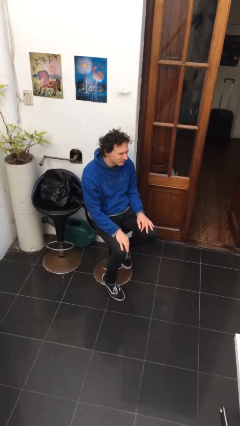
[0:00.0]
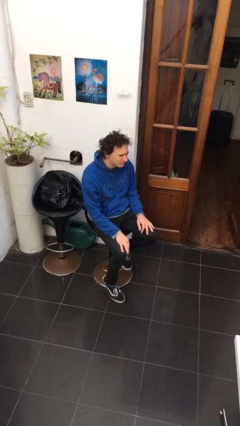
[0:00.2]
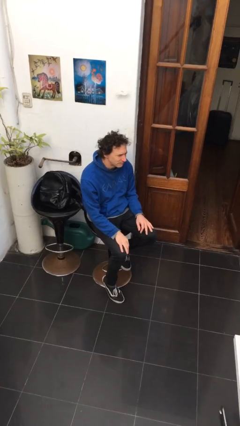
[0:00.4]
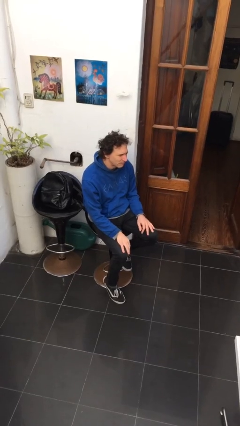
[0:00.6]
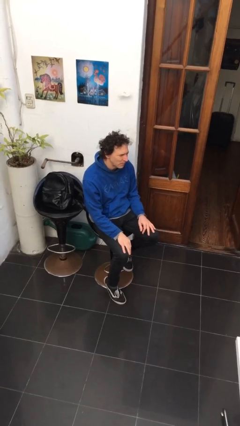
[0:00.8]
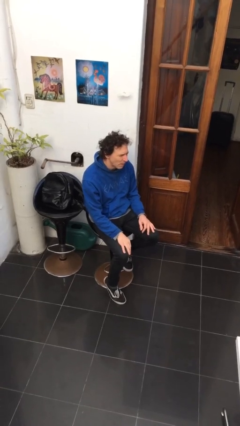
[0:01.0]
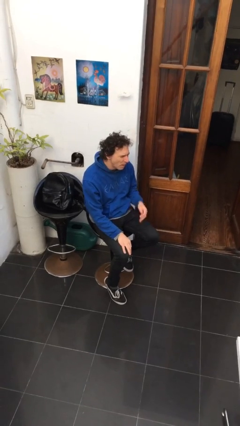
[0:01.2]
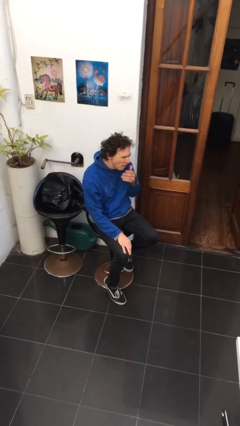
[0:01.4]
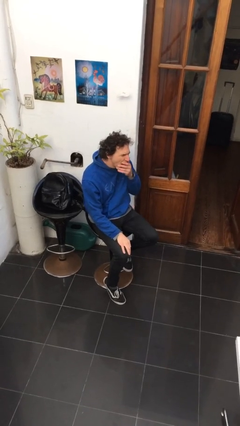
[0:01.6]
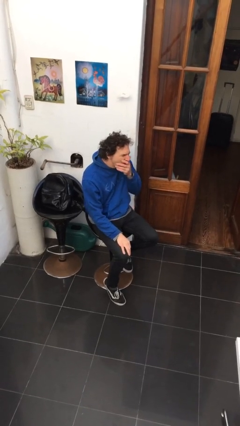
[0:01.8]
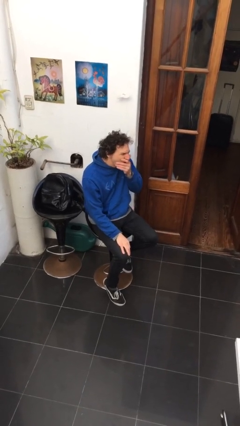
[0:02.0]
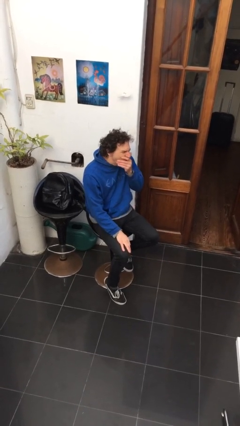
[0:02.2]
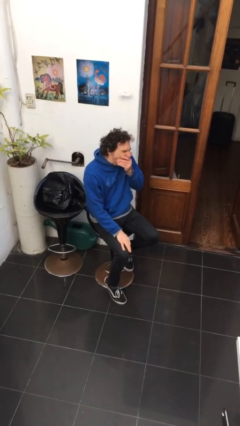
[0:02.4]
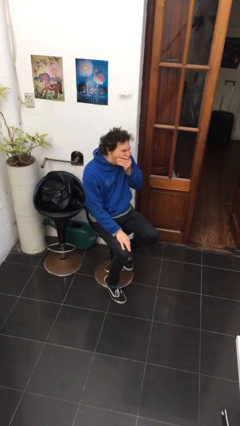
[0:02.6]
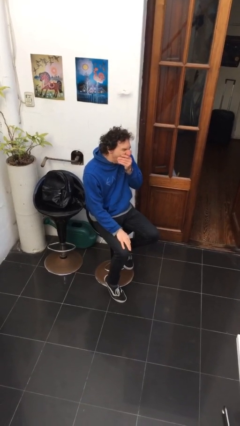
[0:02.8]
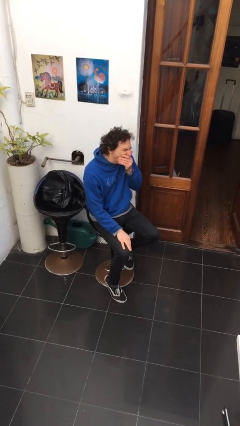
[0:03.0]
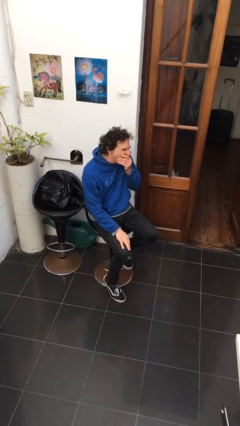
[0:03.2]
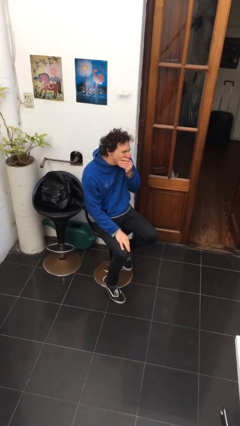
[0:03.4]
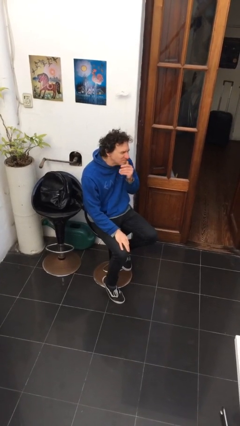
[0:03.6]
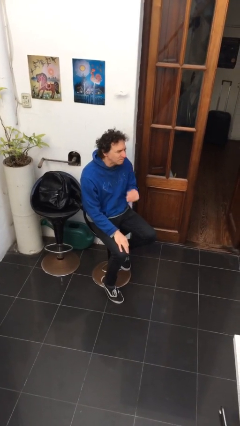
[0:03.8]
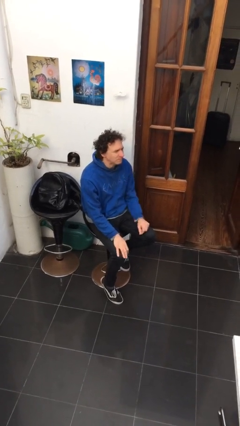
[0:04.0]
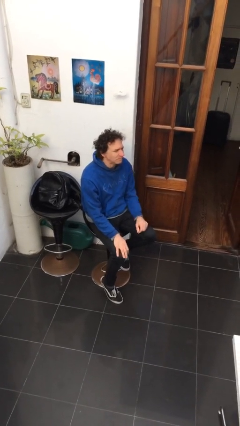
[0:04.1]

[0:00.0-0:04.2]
person yawns

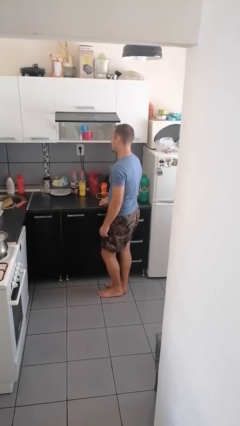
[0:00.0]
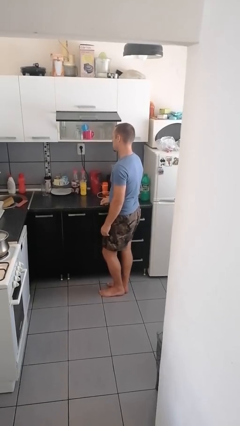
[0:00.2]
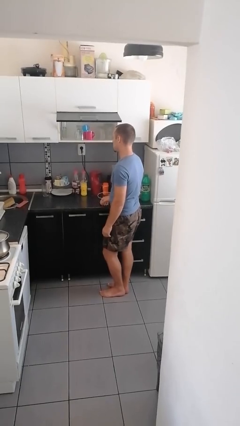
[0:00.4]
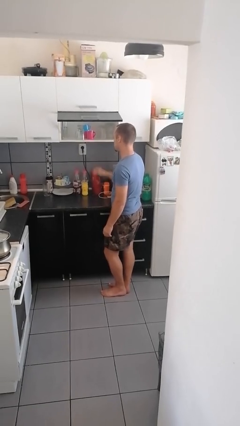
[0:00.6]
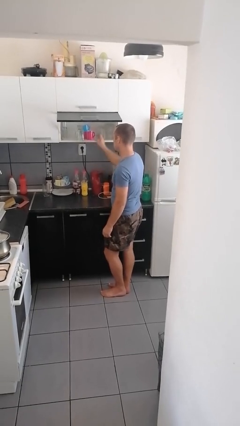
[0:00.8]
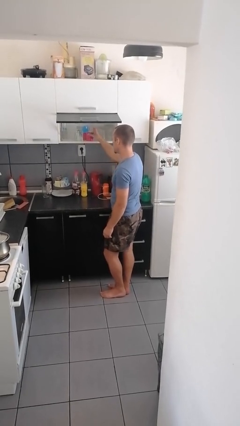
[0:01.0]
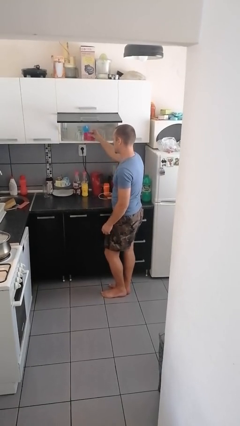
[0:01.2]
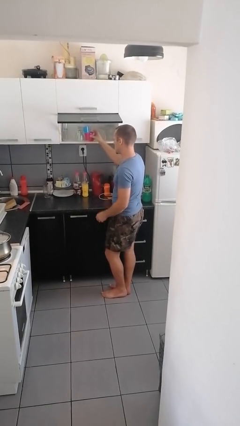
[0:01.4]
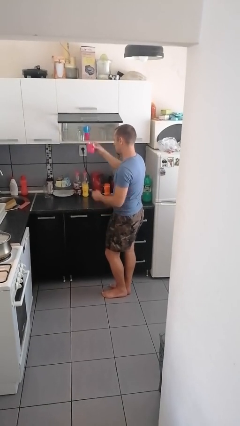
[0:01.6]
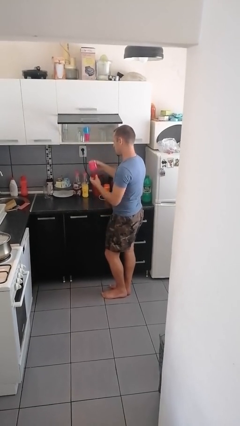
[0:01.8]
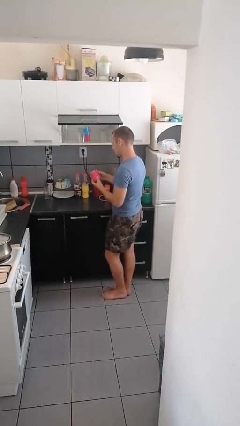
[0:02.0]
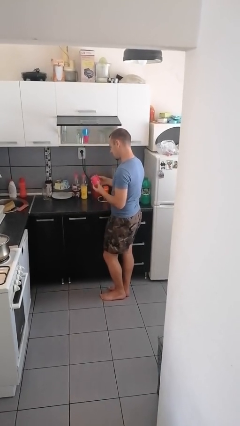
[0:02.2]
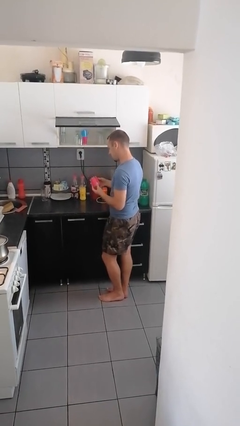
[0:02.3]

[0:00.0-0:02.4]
person picks up object from cabinet

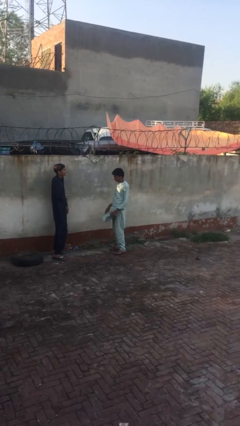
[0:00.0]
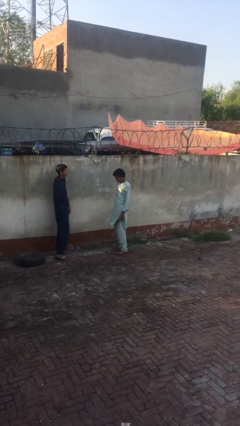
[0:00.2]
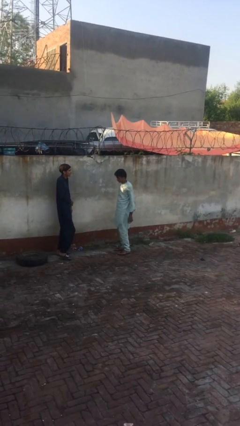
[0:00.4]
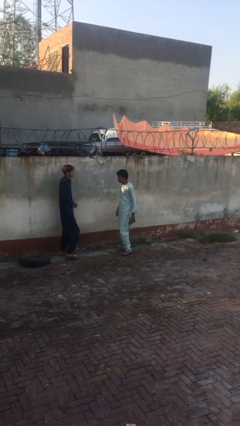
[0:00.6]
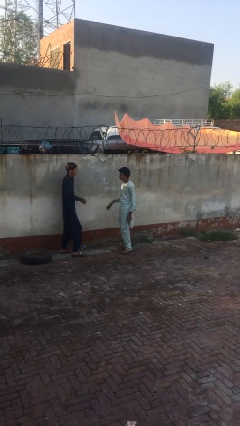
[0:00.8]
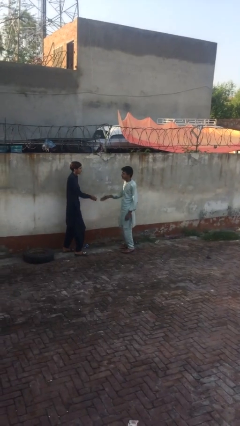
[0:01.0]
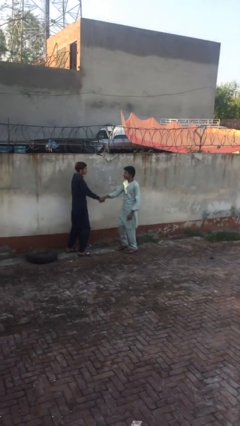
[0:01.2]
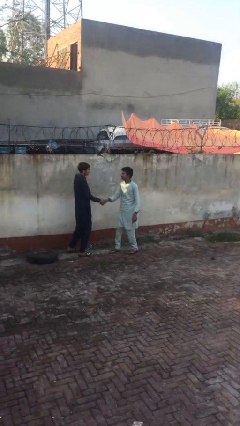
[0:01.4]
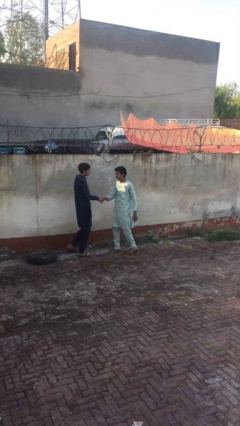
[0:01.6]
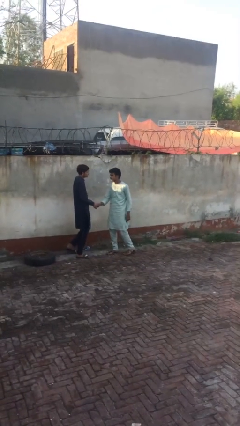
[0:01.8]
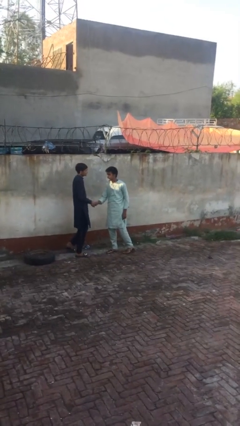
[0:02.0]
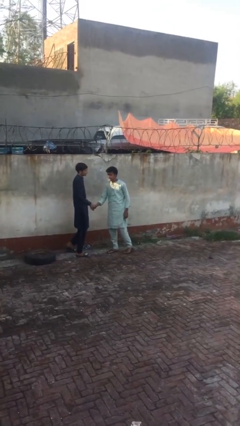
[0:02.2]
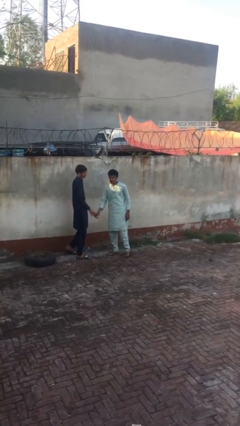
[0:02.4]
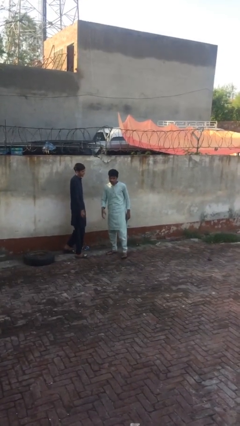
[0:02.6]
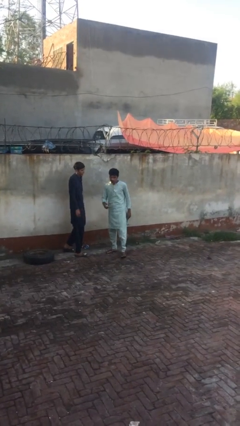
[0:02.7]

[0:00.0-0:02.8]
person shakes hand

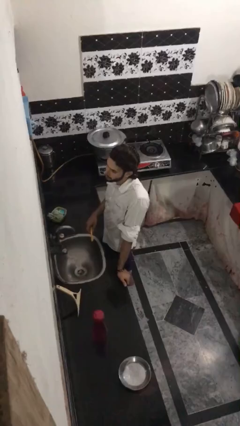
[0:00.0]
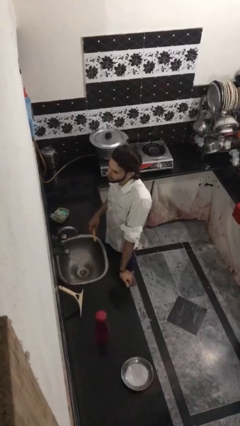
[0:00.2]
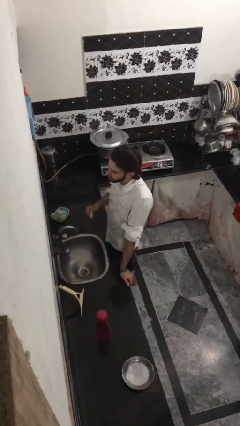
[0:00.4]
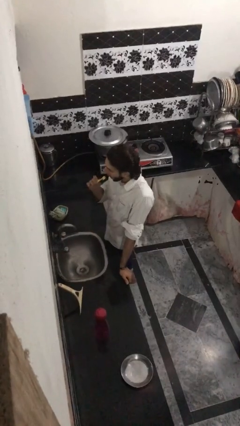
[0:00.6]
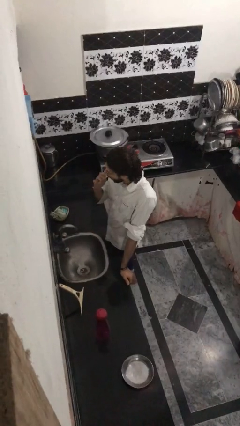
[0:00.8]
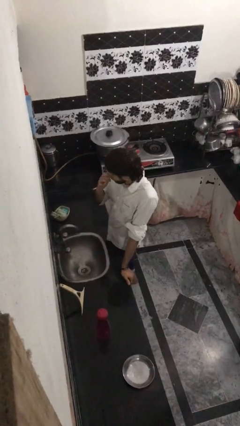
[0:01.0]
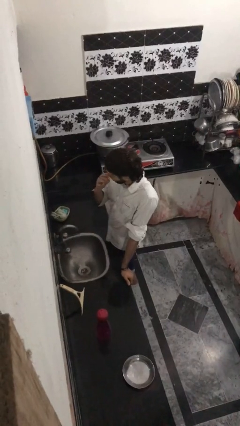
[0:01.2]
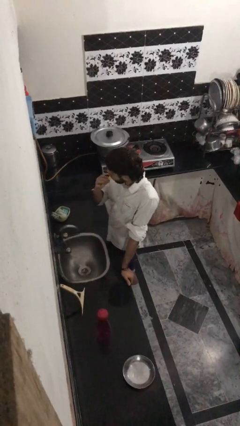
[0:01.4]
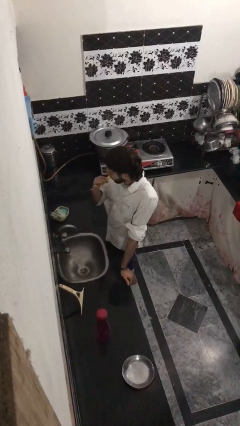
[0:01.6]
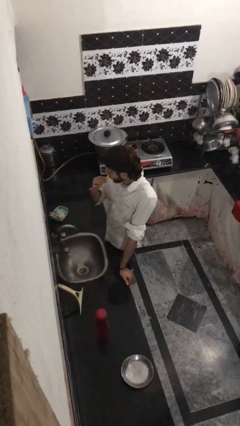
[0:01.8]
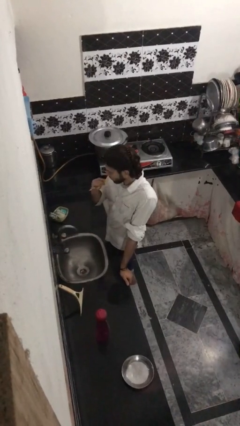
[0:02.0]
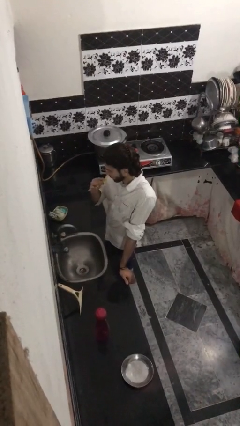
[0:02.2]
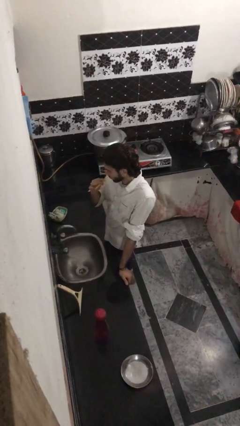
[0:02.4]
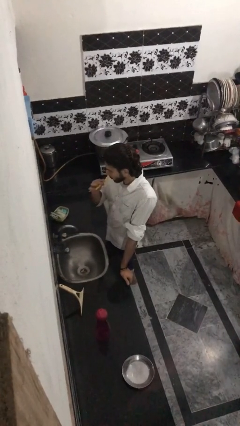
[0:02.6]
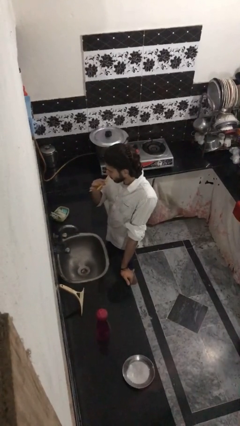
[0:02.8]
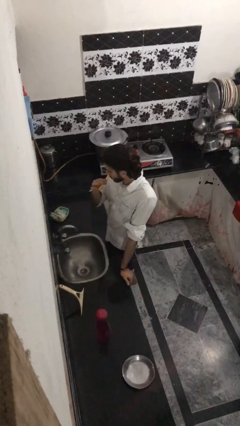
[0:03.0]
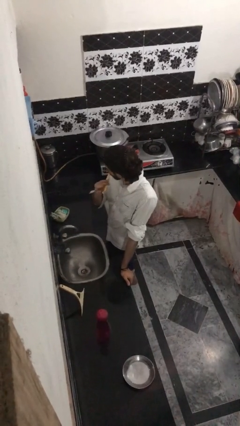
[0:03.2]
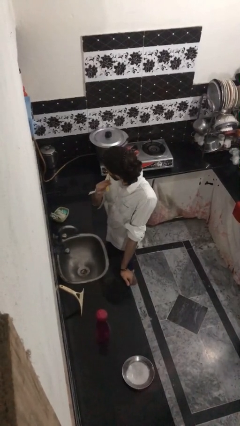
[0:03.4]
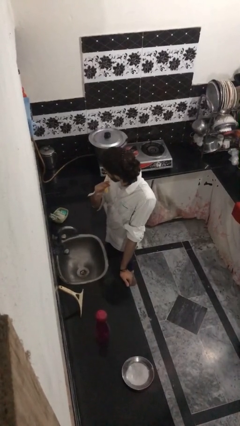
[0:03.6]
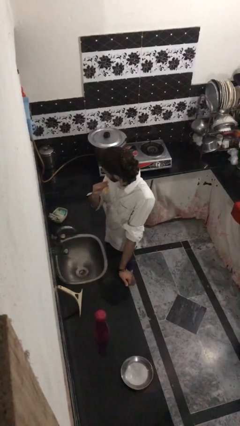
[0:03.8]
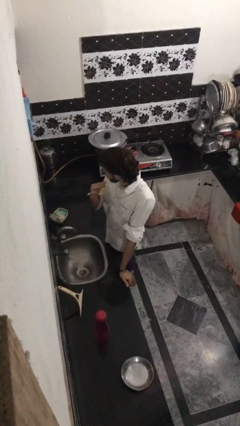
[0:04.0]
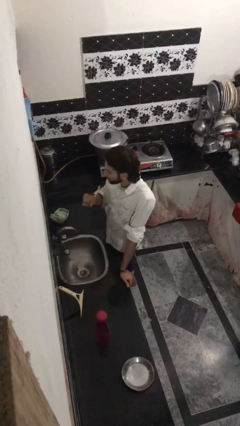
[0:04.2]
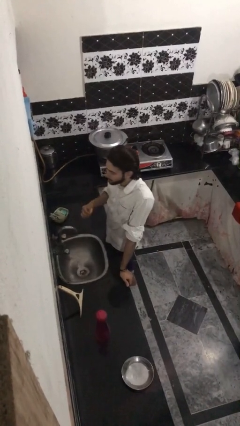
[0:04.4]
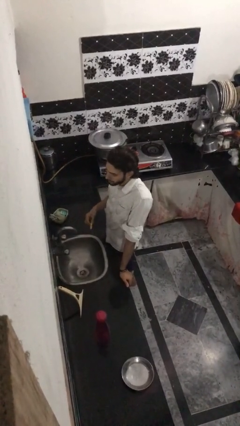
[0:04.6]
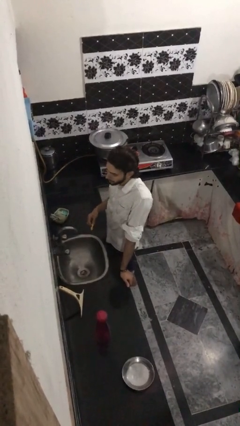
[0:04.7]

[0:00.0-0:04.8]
person brushes teeth

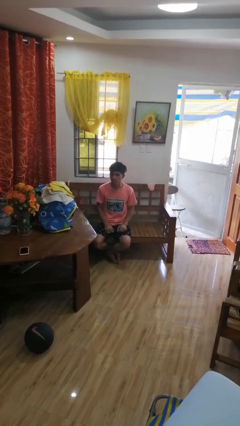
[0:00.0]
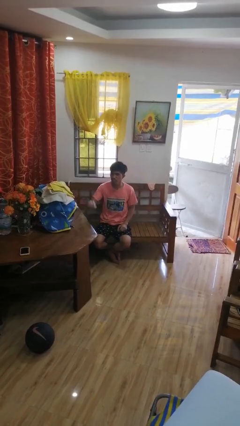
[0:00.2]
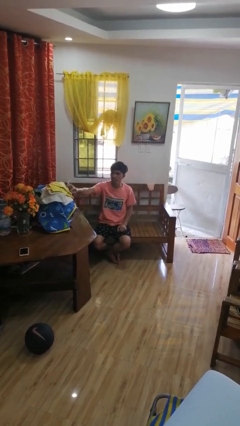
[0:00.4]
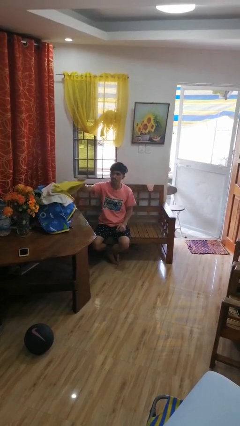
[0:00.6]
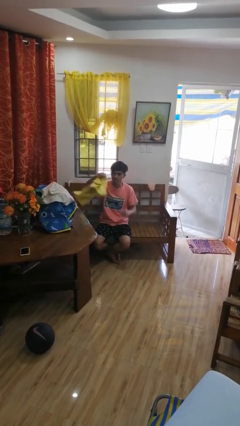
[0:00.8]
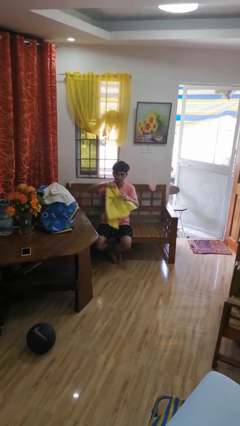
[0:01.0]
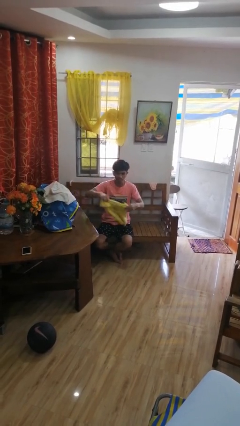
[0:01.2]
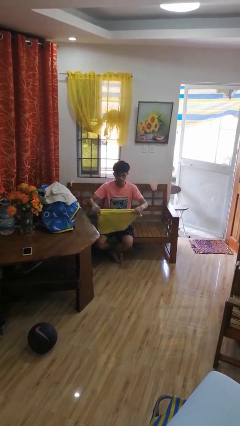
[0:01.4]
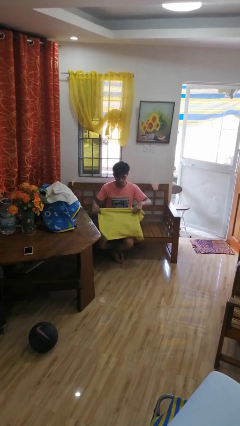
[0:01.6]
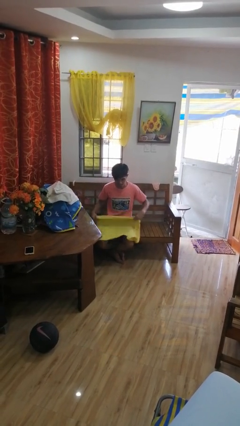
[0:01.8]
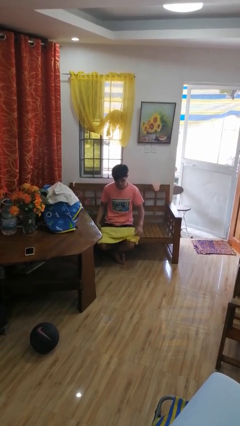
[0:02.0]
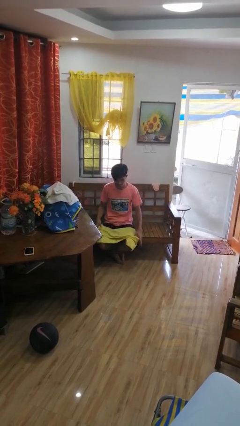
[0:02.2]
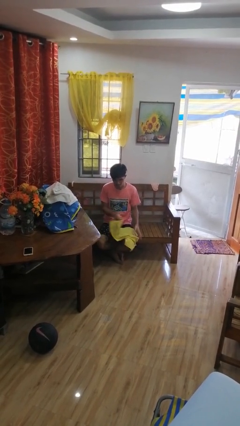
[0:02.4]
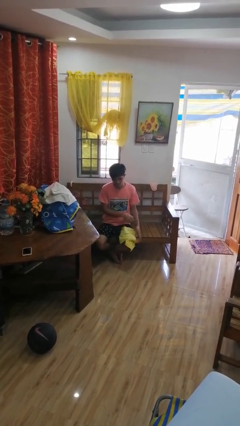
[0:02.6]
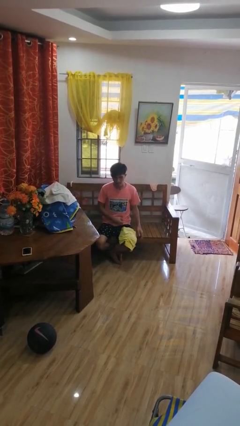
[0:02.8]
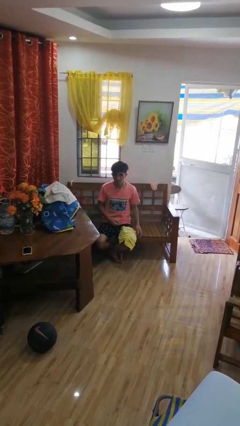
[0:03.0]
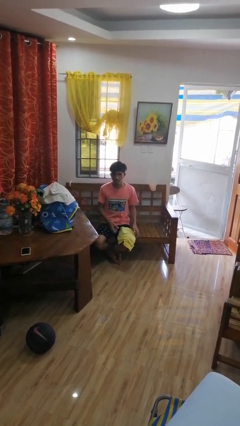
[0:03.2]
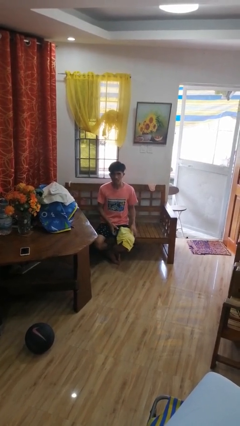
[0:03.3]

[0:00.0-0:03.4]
person folds shirt

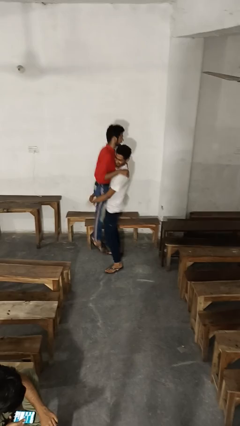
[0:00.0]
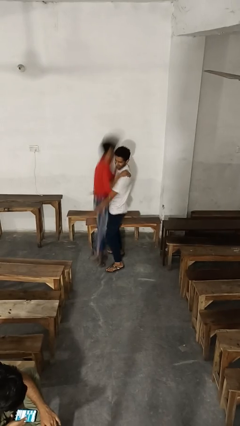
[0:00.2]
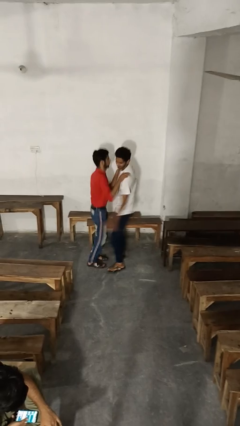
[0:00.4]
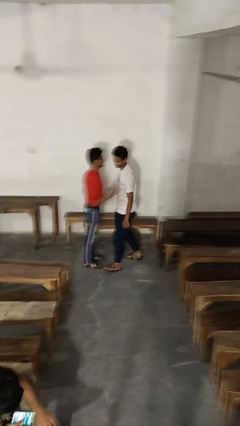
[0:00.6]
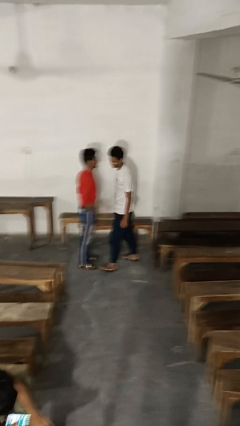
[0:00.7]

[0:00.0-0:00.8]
person puts down person
